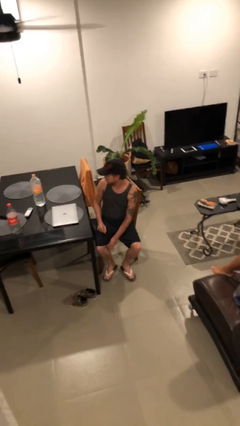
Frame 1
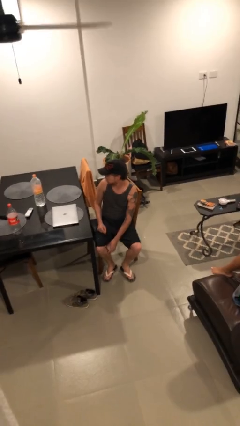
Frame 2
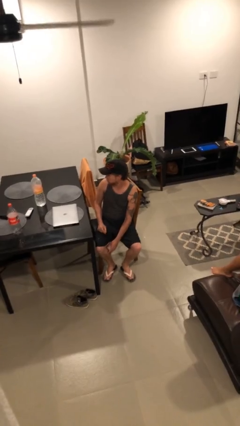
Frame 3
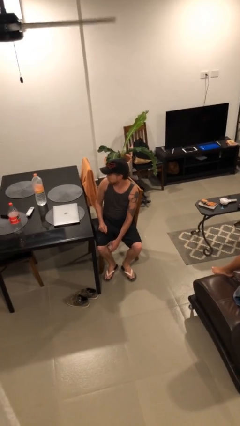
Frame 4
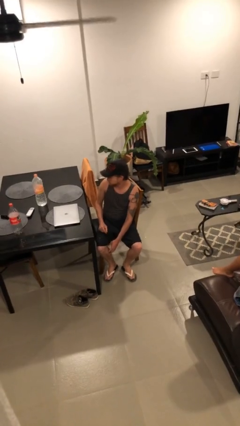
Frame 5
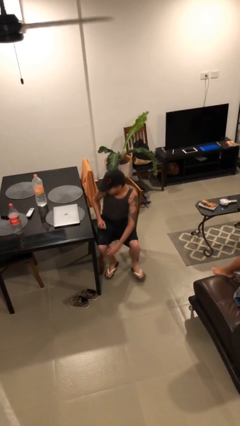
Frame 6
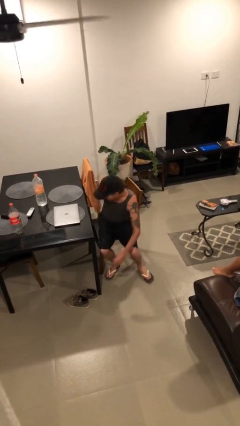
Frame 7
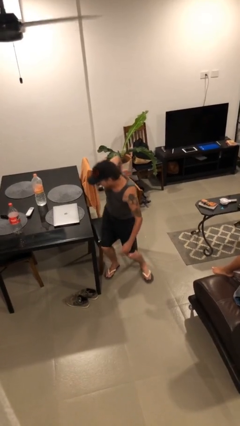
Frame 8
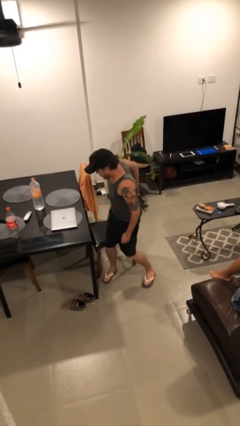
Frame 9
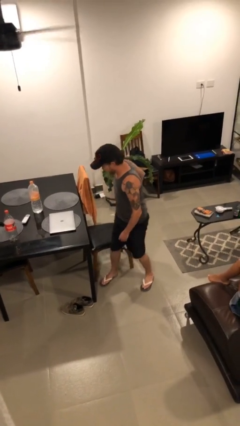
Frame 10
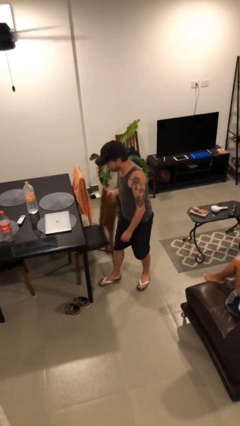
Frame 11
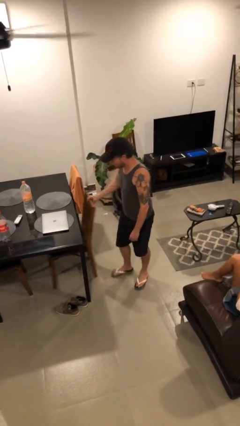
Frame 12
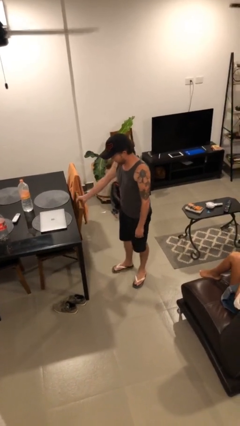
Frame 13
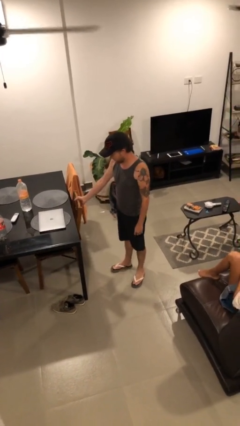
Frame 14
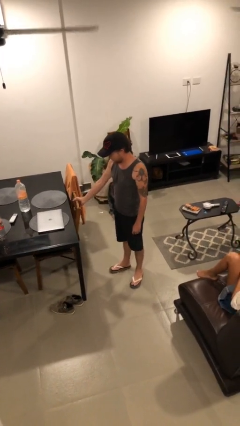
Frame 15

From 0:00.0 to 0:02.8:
person stands up

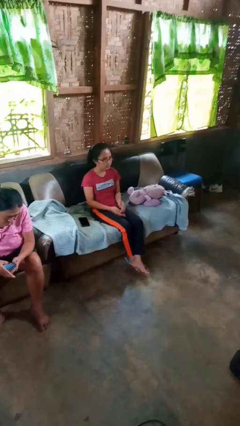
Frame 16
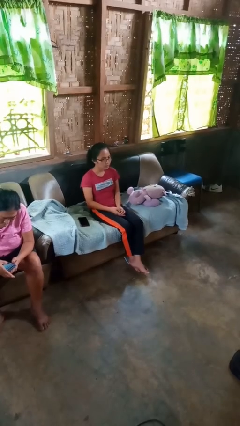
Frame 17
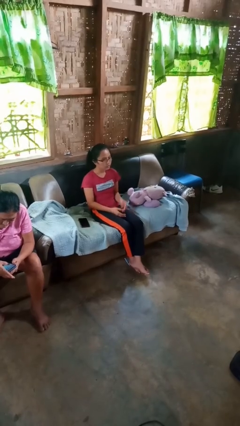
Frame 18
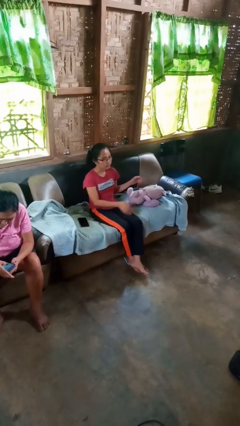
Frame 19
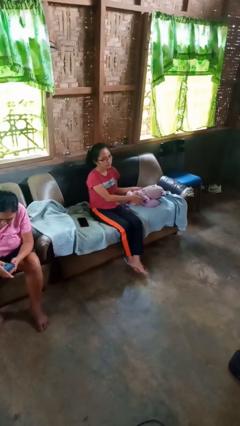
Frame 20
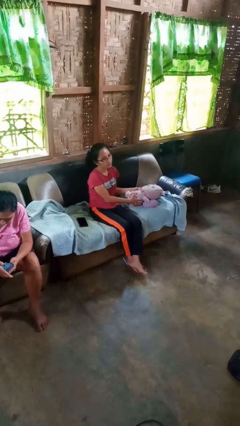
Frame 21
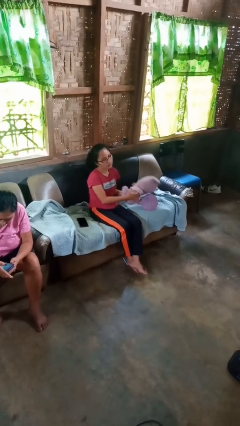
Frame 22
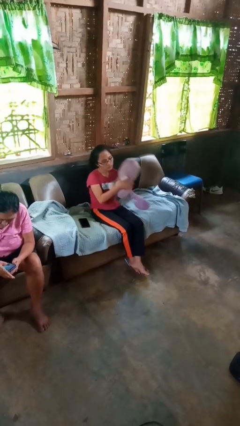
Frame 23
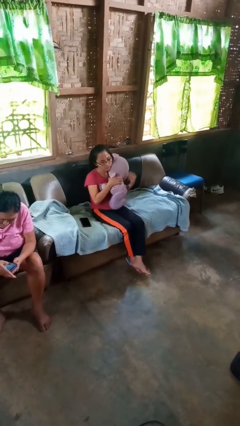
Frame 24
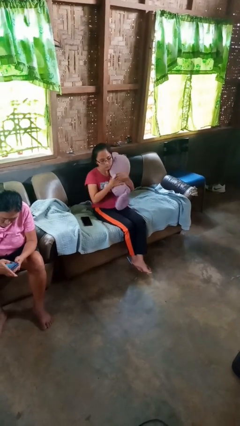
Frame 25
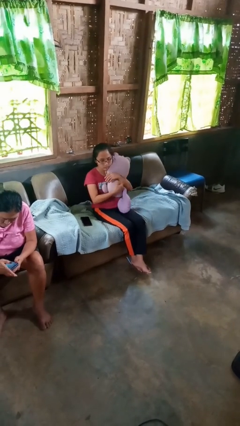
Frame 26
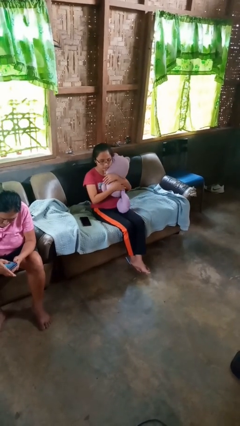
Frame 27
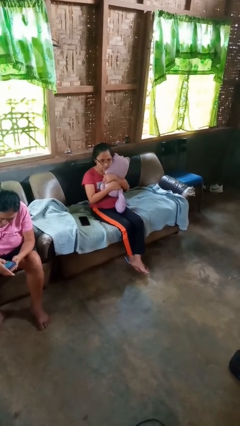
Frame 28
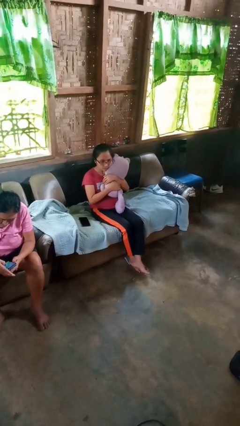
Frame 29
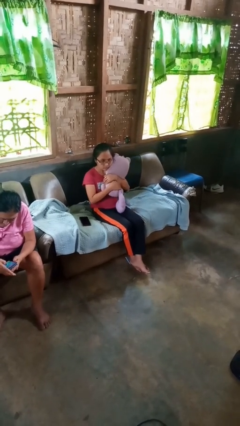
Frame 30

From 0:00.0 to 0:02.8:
person hugs stuffed animal

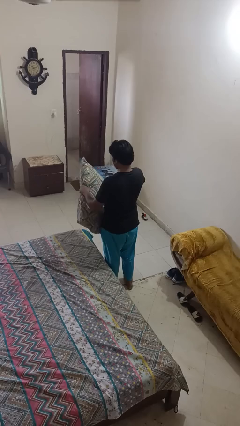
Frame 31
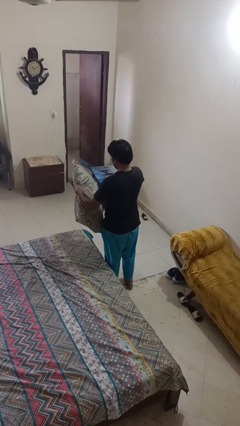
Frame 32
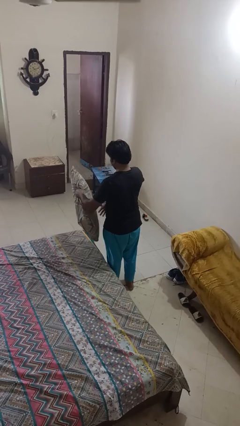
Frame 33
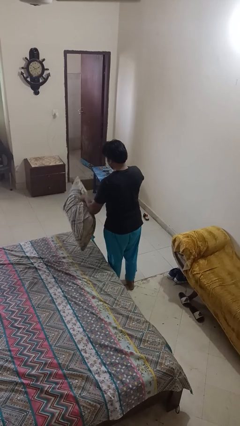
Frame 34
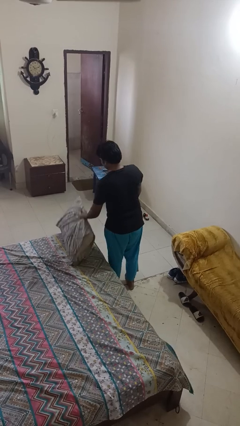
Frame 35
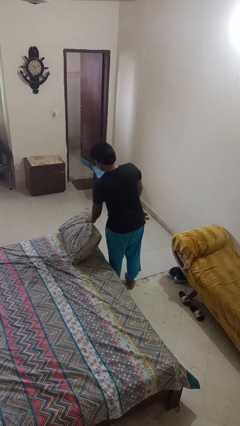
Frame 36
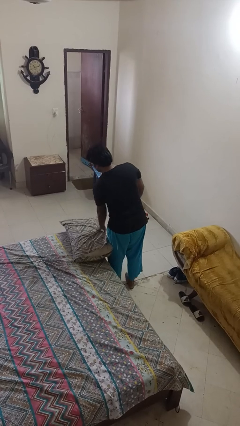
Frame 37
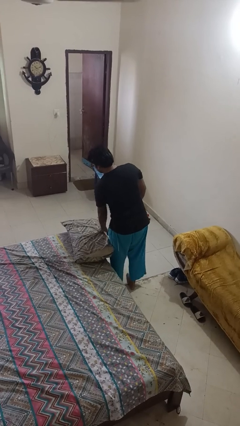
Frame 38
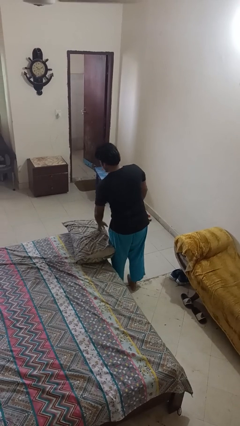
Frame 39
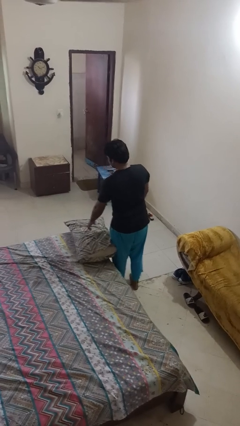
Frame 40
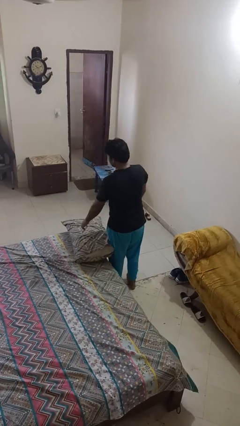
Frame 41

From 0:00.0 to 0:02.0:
person puts down object on bed

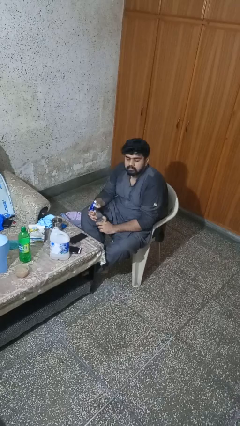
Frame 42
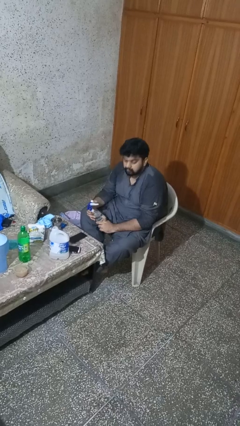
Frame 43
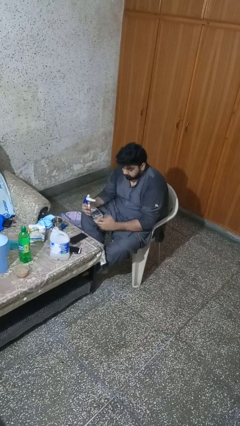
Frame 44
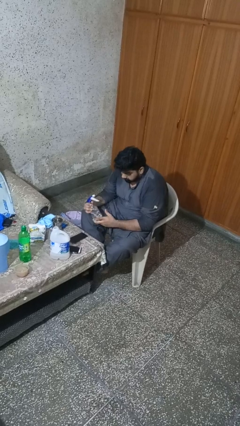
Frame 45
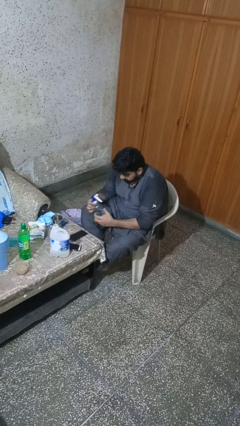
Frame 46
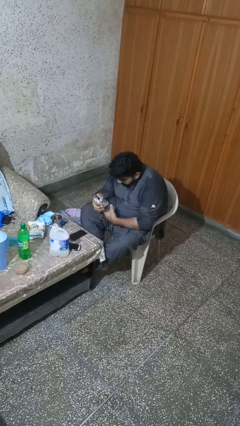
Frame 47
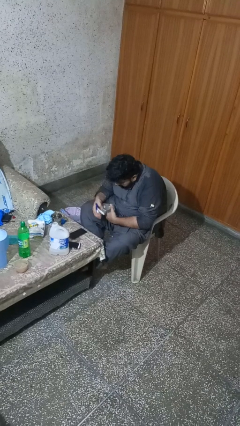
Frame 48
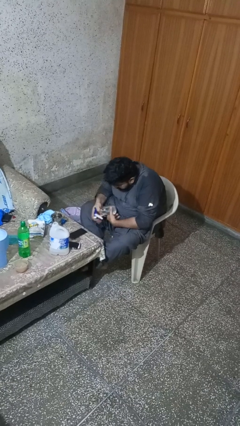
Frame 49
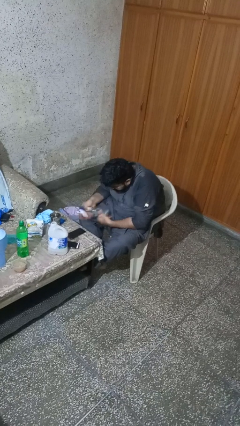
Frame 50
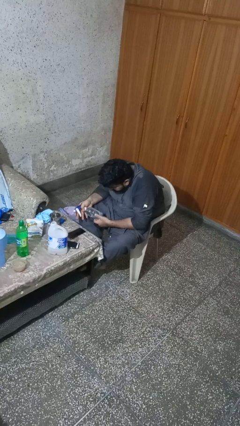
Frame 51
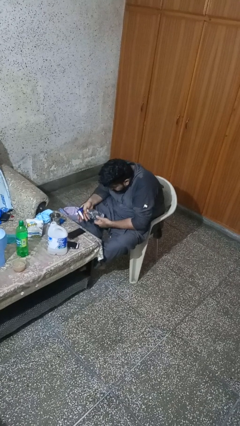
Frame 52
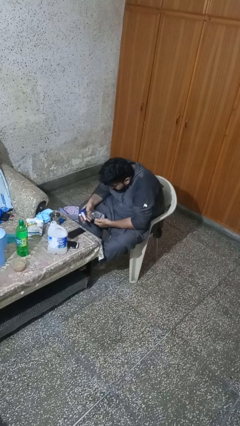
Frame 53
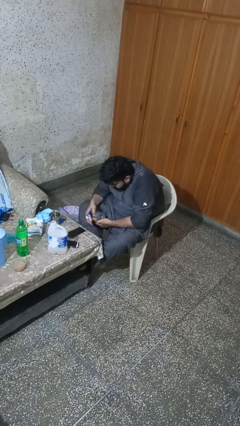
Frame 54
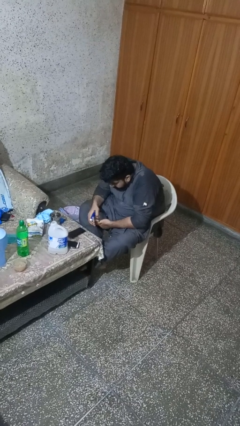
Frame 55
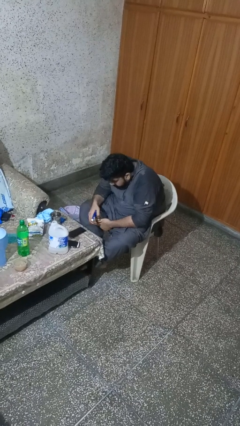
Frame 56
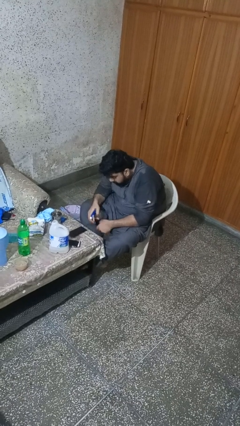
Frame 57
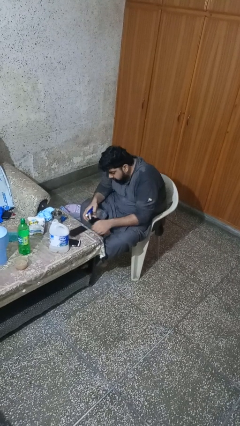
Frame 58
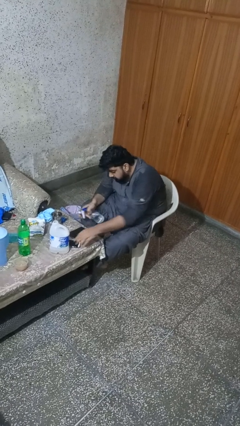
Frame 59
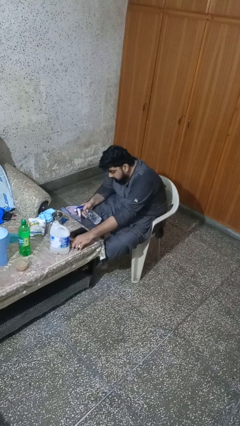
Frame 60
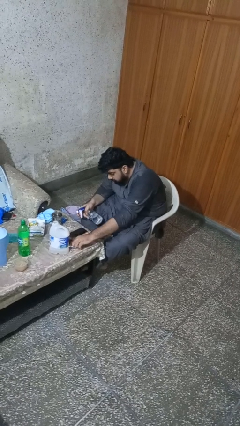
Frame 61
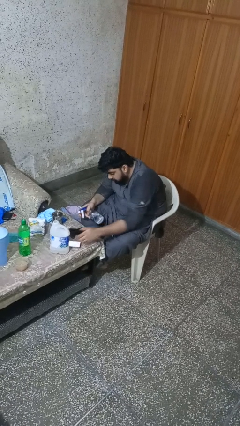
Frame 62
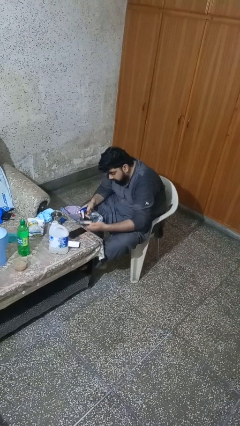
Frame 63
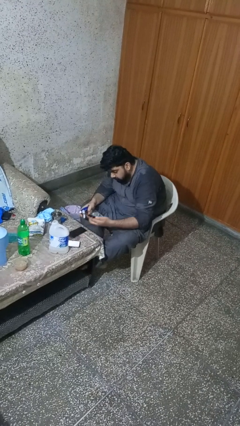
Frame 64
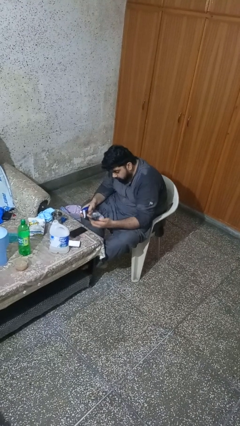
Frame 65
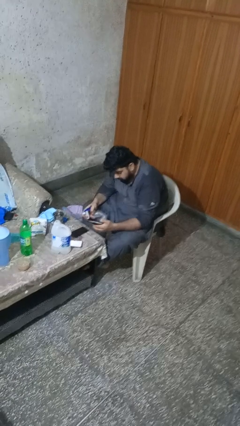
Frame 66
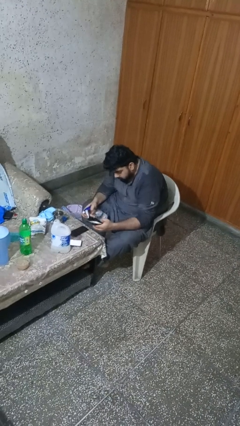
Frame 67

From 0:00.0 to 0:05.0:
person sprays from bottle

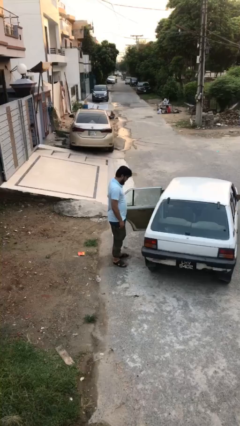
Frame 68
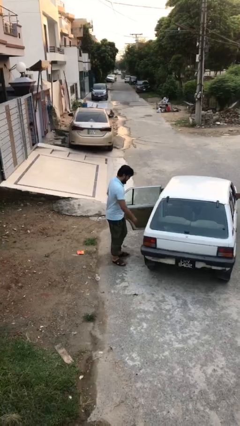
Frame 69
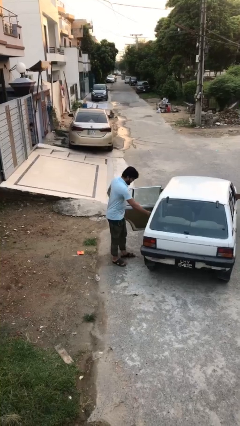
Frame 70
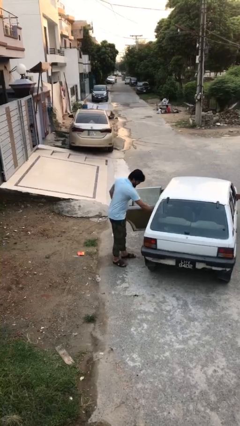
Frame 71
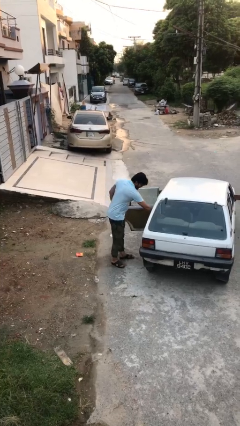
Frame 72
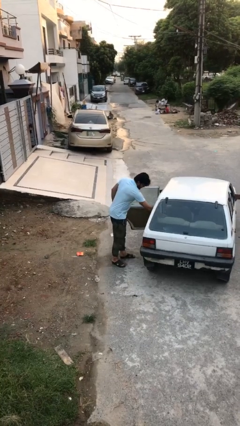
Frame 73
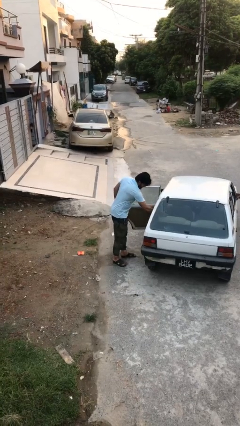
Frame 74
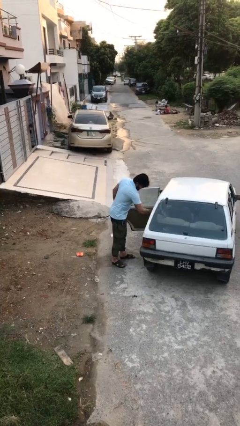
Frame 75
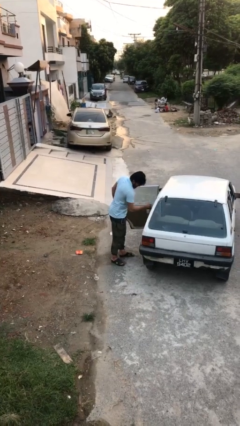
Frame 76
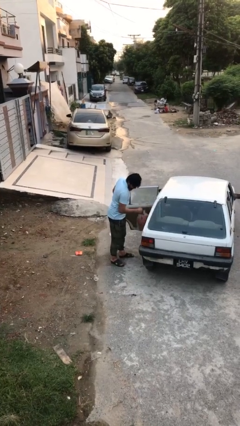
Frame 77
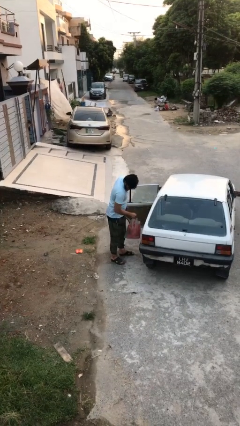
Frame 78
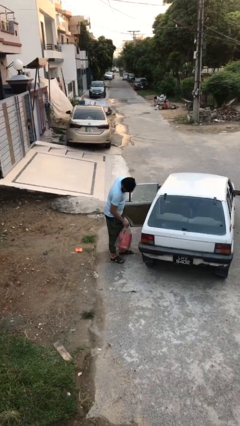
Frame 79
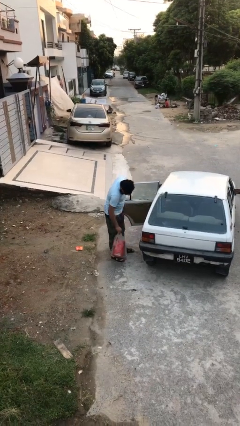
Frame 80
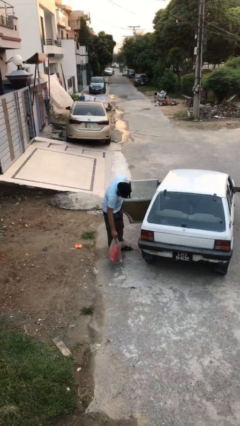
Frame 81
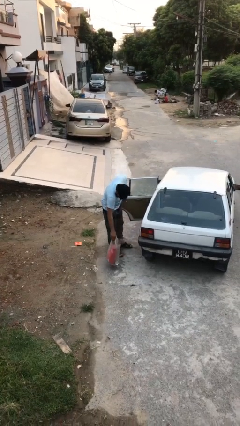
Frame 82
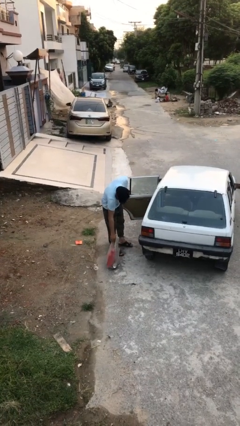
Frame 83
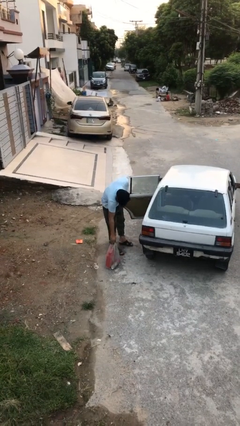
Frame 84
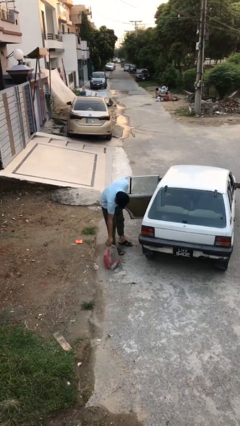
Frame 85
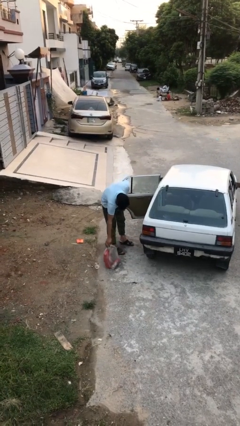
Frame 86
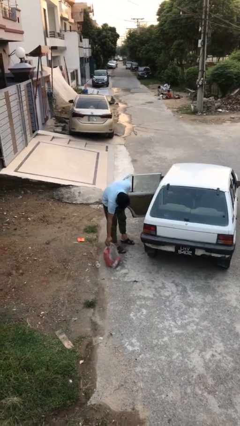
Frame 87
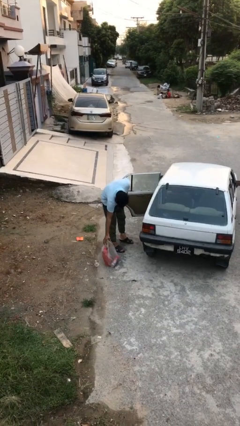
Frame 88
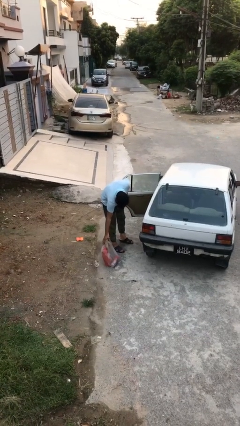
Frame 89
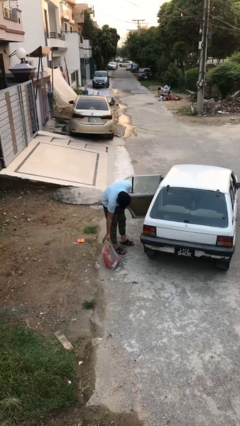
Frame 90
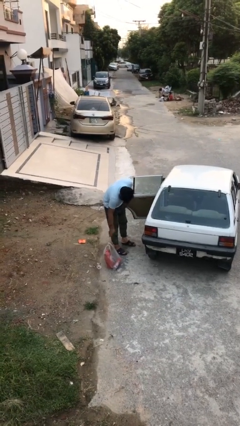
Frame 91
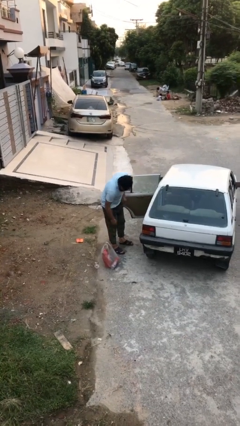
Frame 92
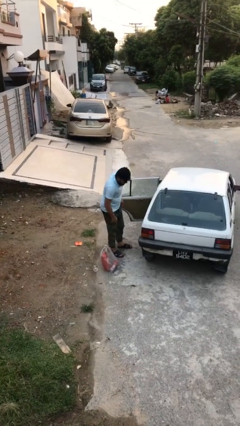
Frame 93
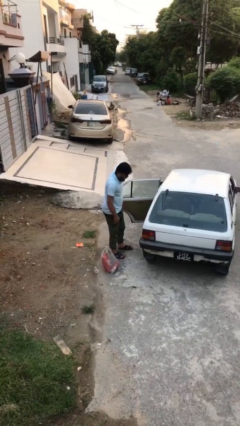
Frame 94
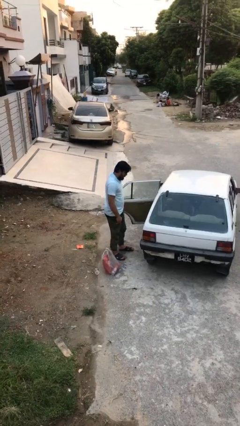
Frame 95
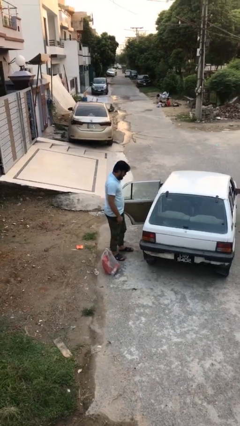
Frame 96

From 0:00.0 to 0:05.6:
person unloads car
